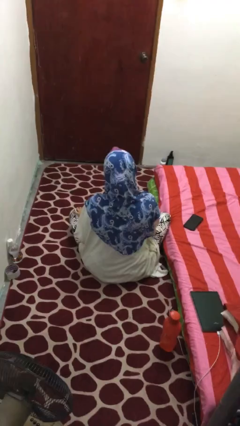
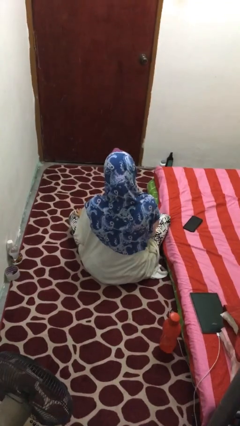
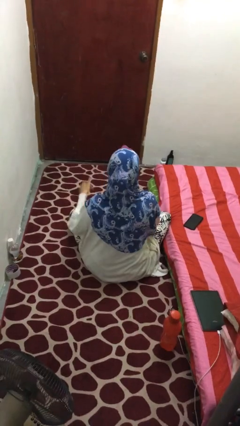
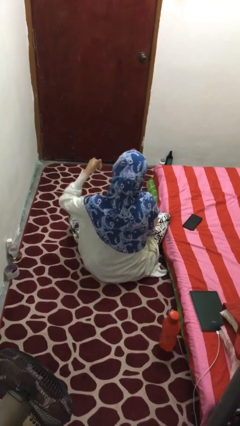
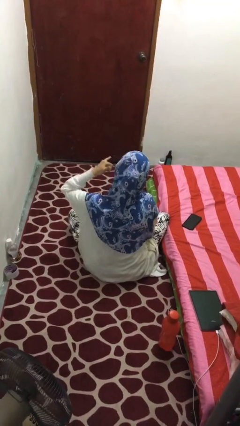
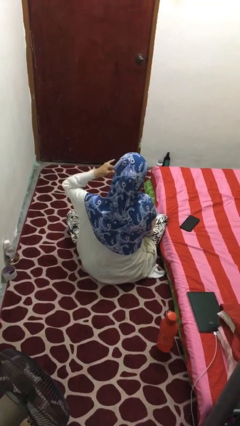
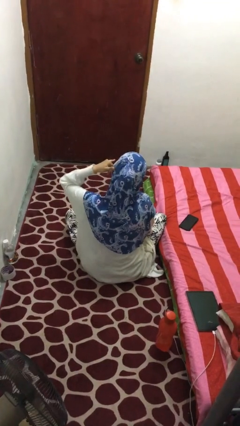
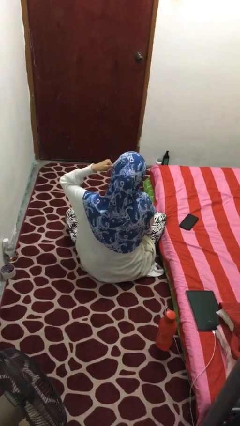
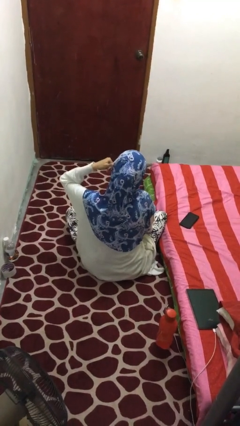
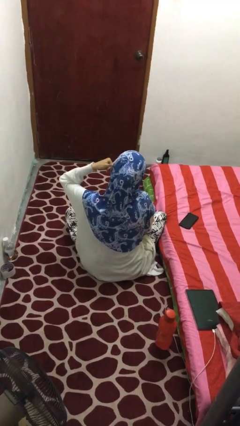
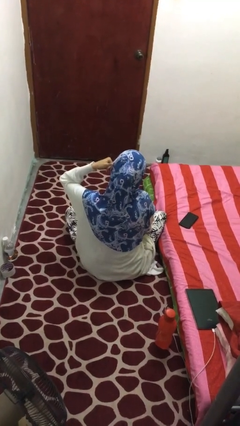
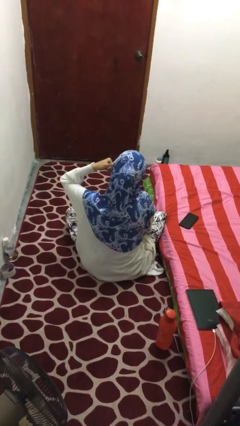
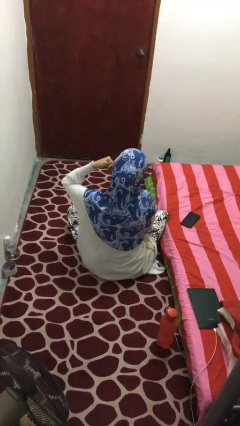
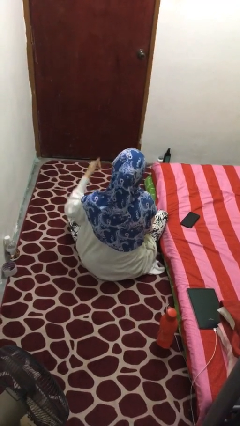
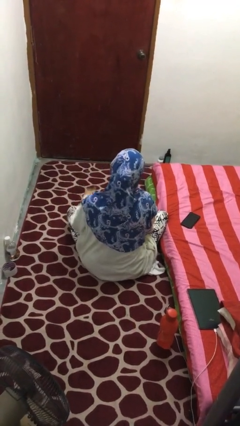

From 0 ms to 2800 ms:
person gestures call me

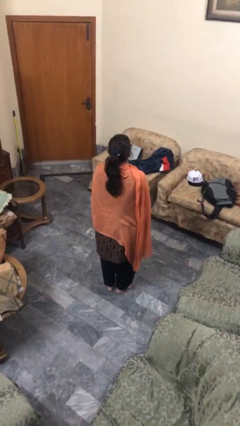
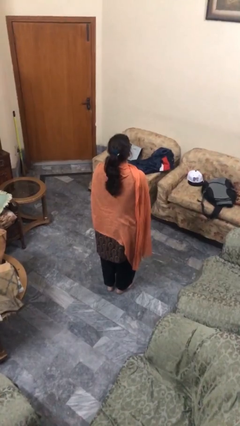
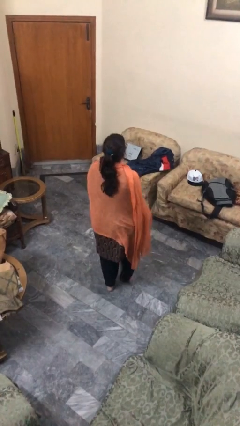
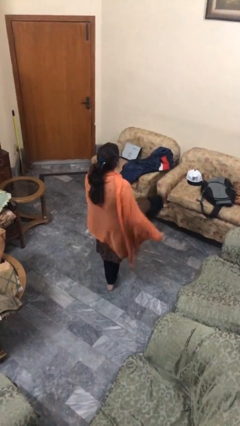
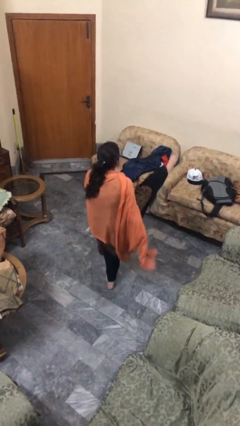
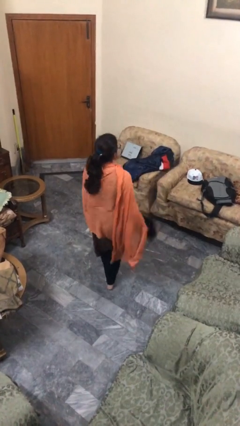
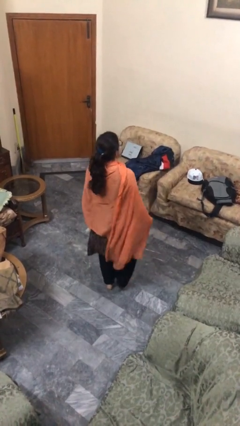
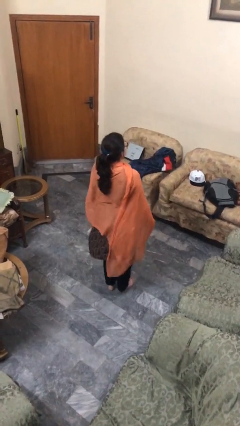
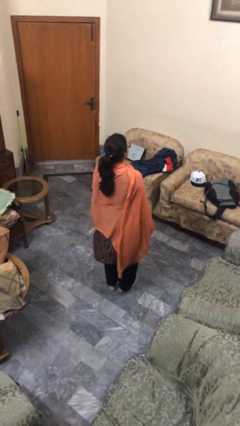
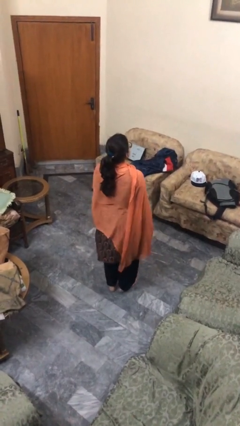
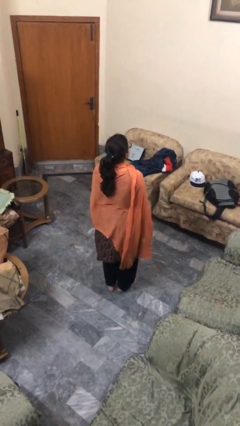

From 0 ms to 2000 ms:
person karate kicks

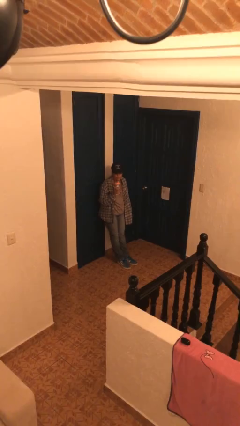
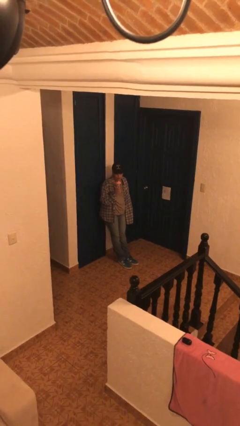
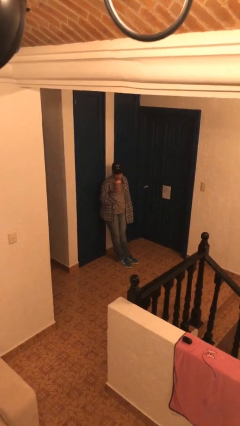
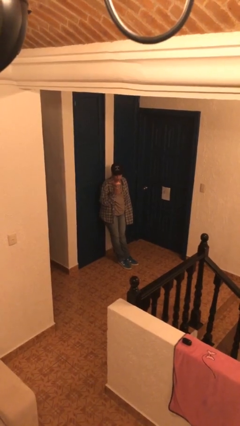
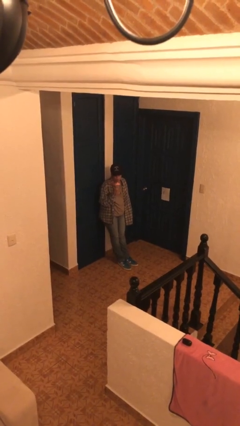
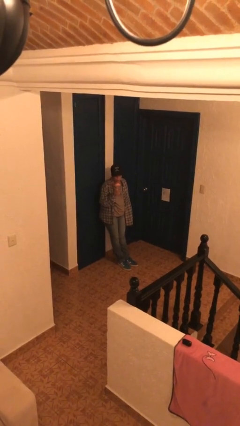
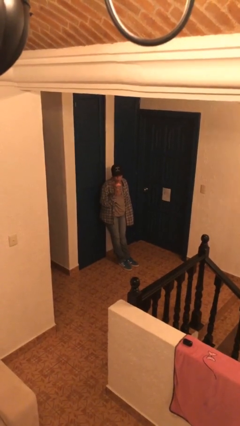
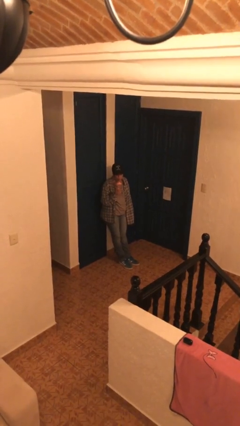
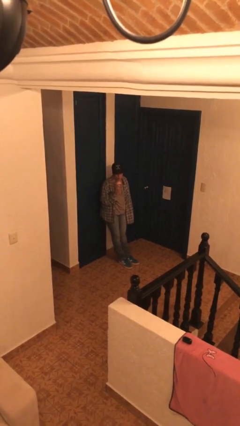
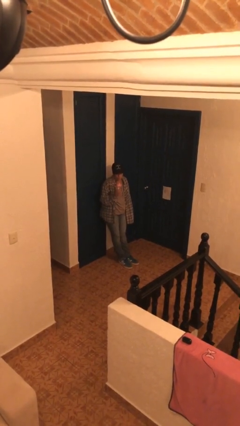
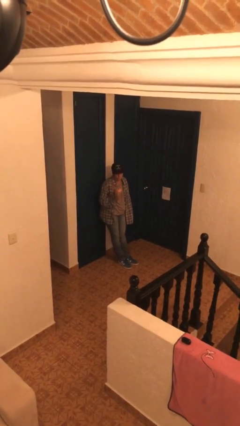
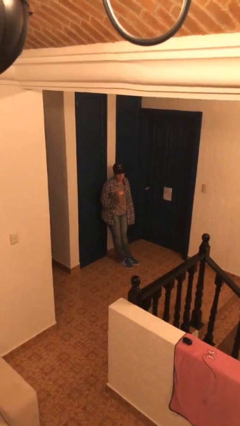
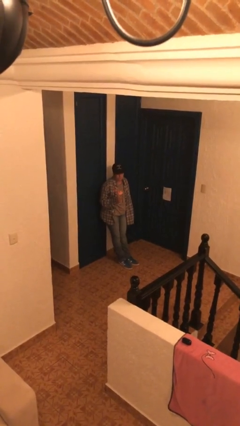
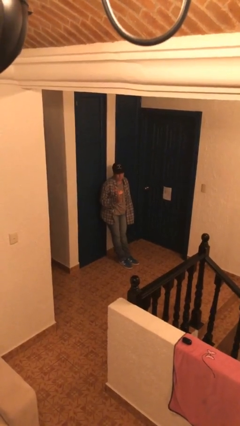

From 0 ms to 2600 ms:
person drinks from straw

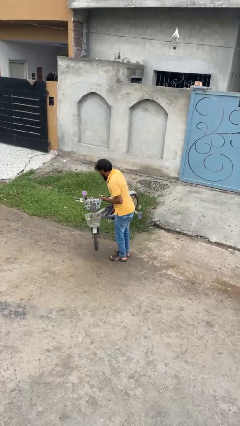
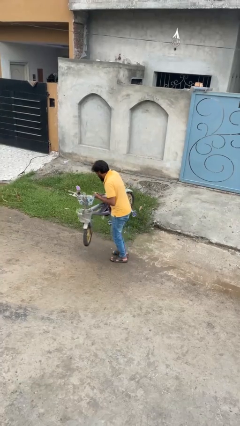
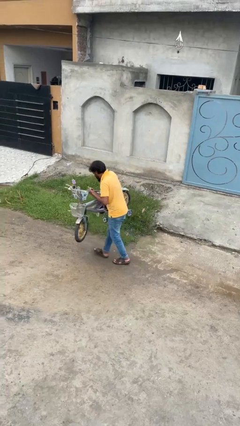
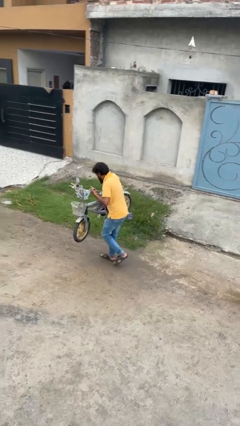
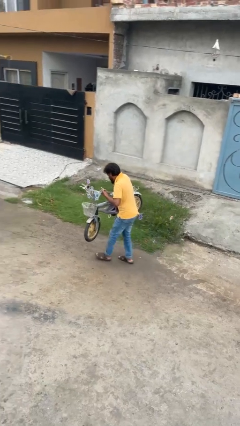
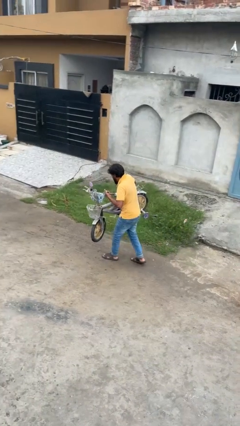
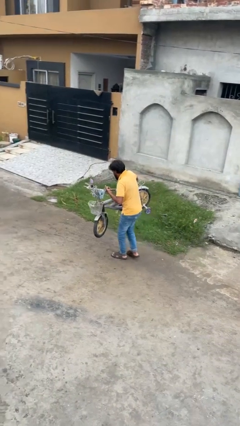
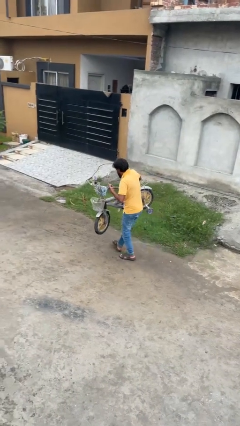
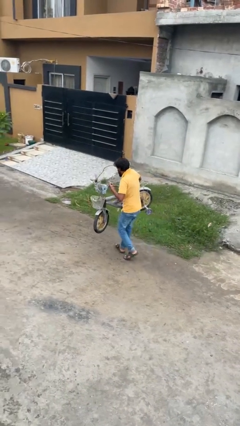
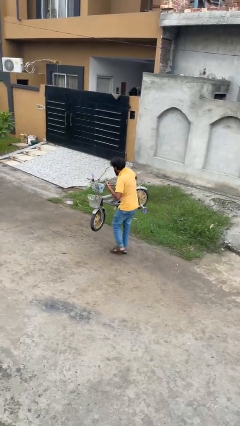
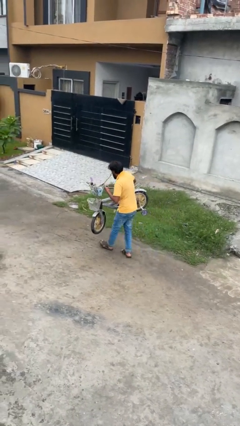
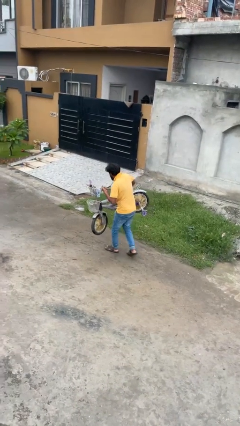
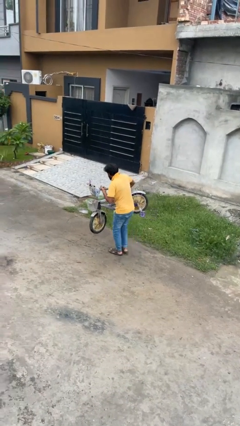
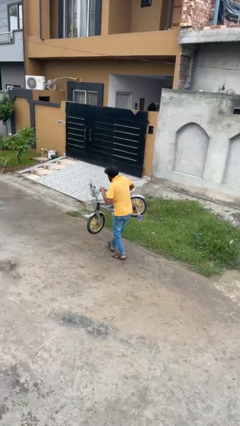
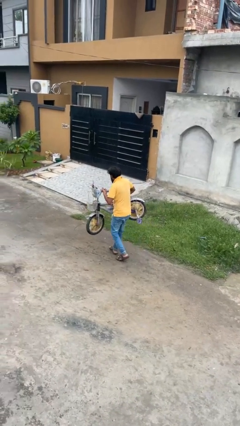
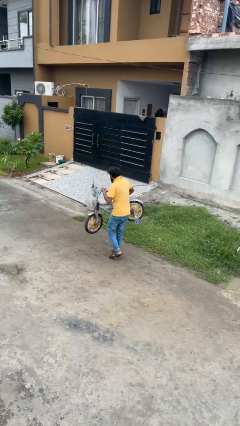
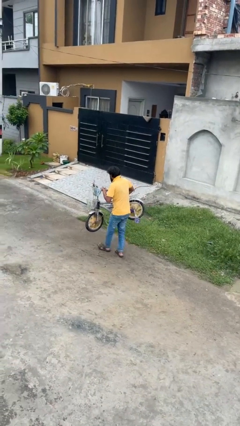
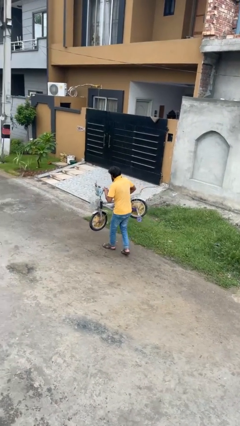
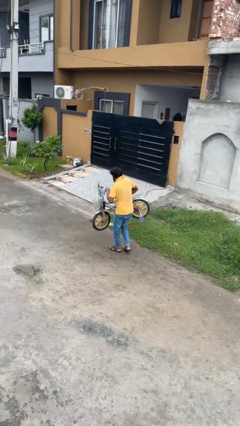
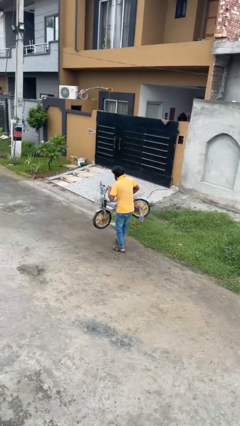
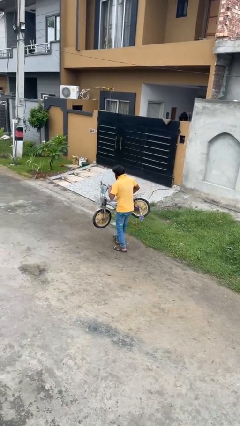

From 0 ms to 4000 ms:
person carries bicycle

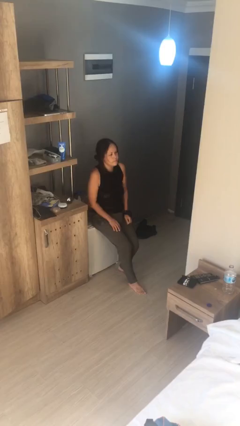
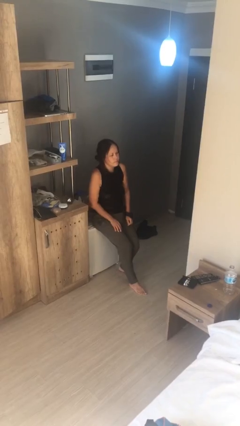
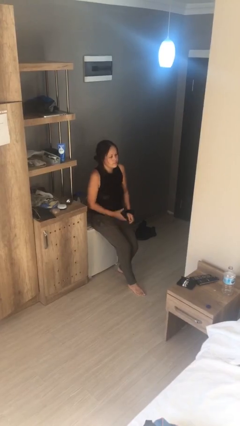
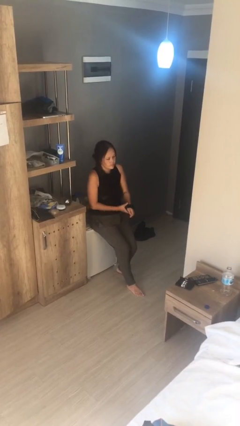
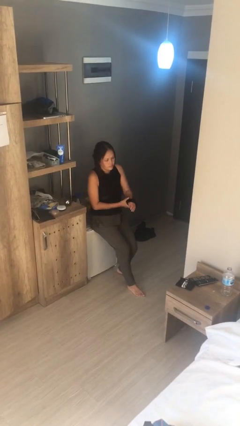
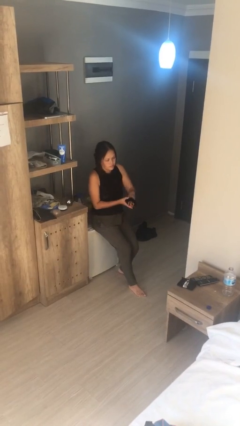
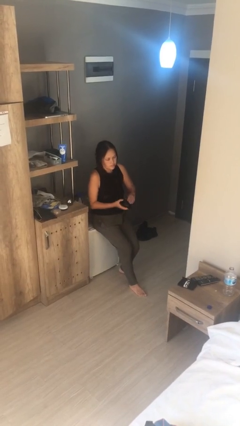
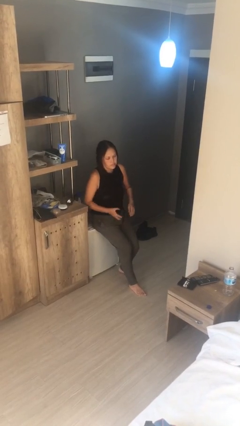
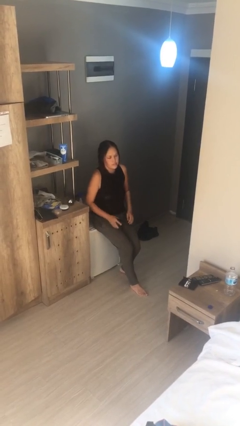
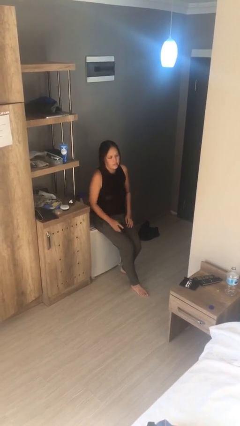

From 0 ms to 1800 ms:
person takes off wristwatch

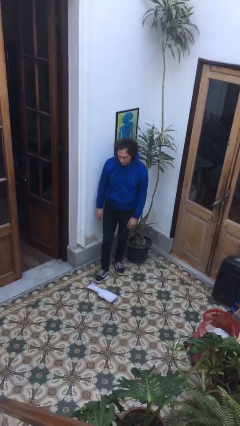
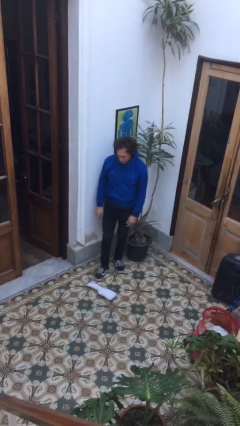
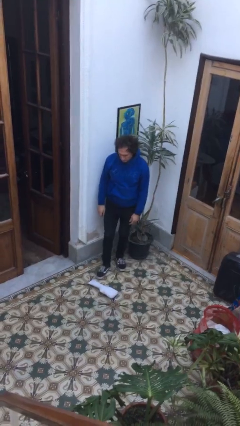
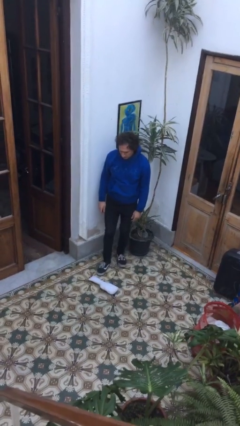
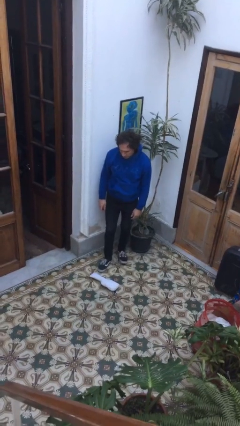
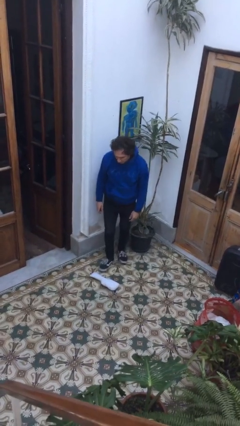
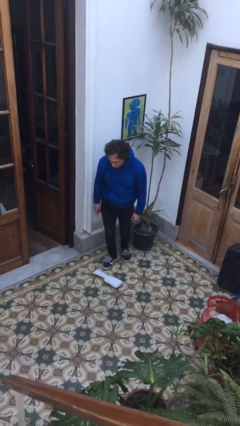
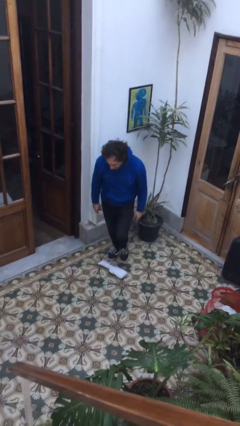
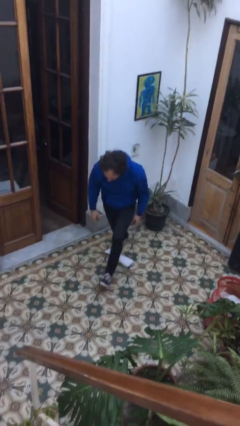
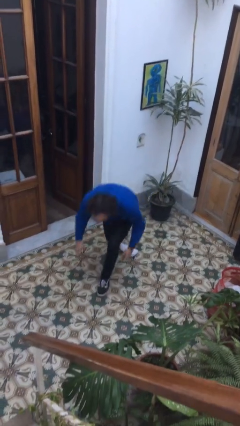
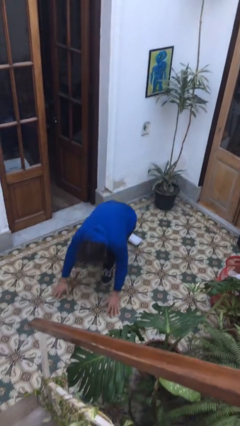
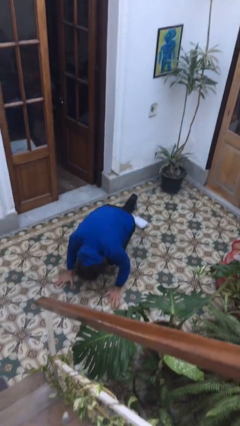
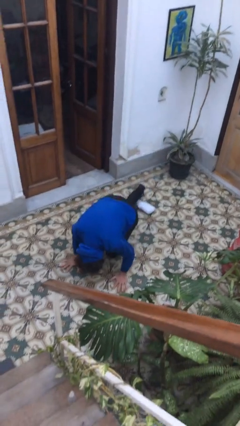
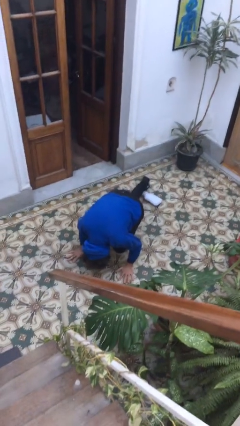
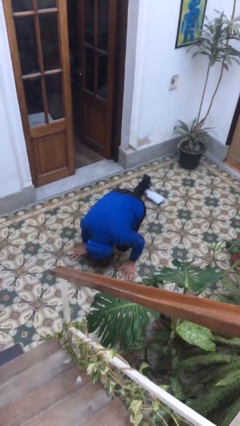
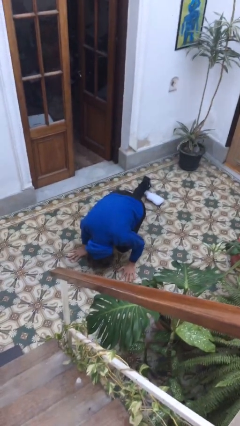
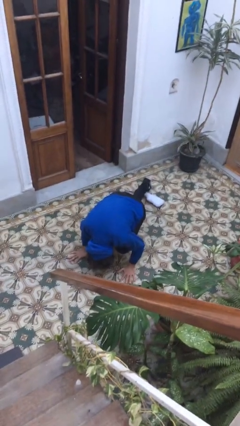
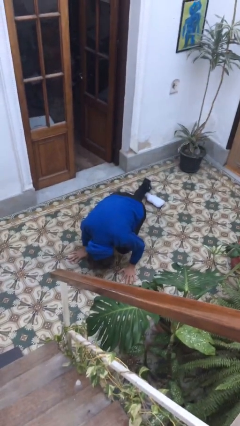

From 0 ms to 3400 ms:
person trips on object on floor

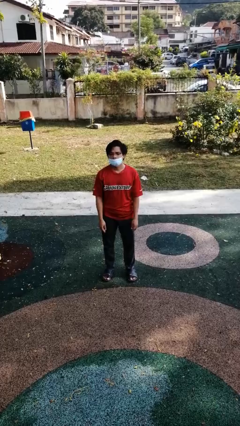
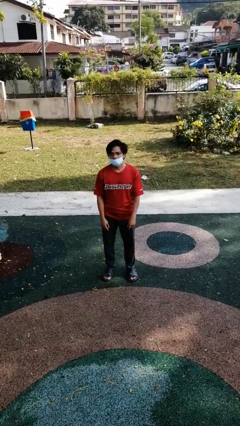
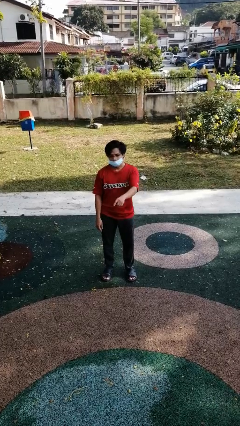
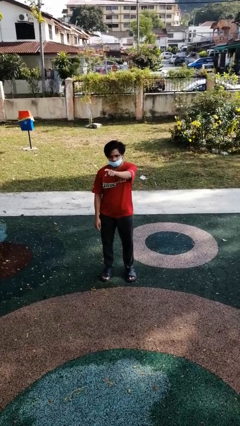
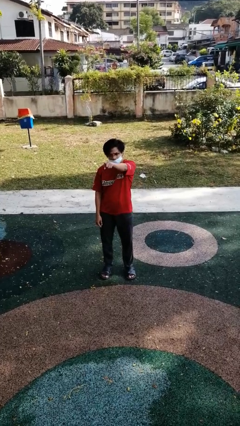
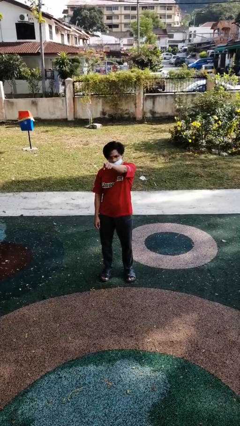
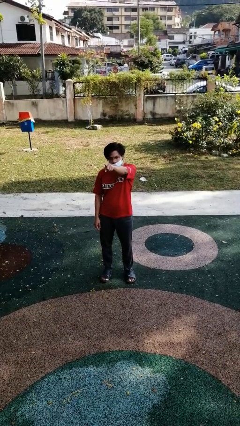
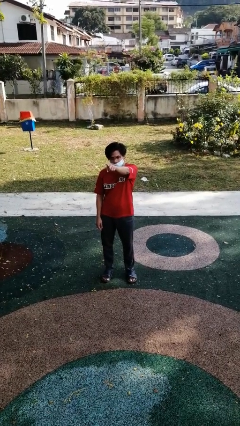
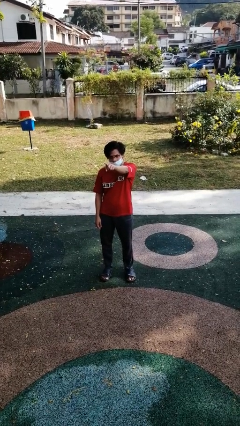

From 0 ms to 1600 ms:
person points at person
